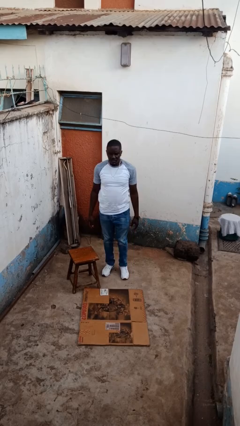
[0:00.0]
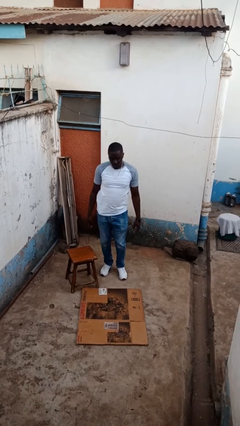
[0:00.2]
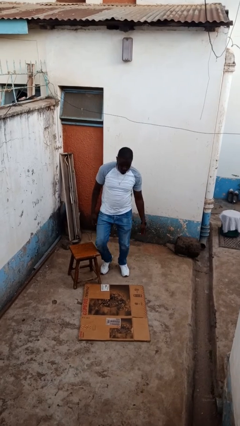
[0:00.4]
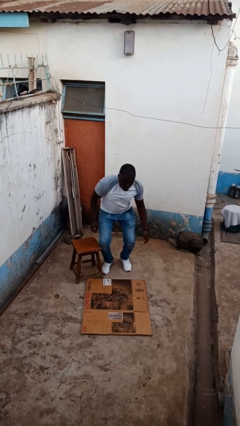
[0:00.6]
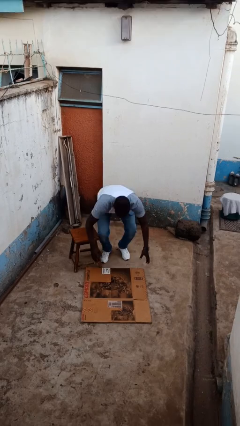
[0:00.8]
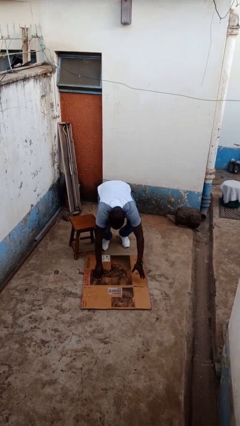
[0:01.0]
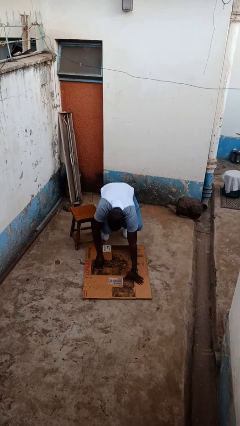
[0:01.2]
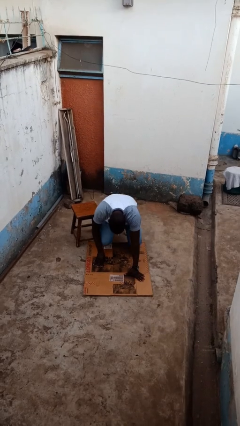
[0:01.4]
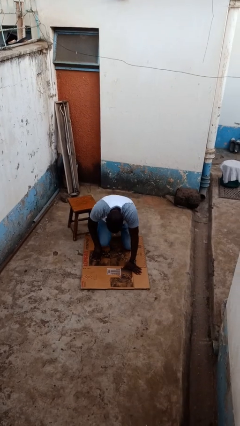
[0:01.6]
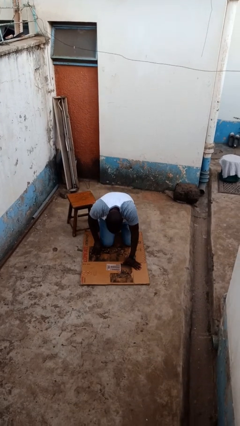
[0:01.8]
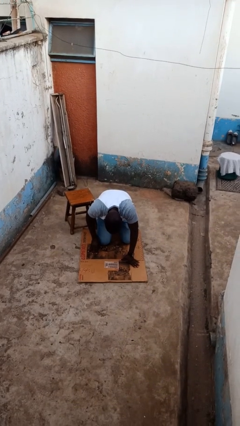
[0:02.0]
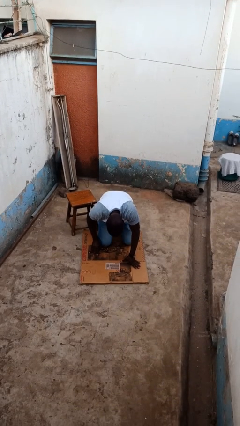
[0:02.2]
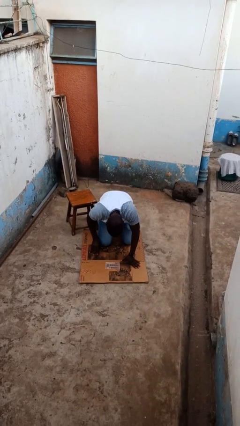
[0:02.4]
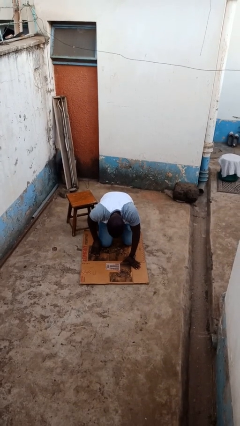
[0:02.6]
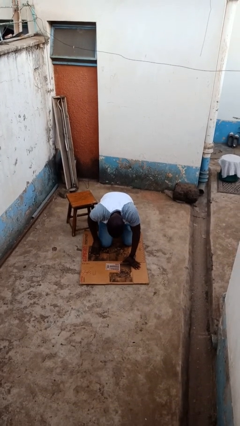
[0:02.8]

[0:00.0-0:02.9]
person trips on object on floor

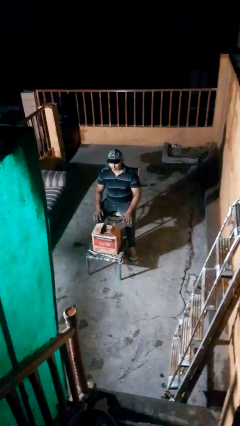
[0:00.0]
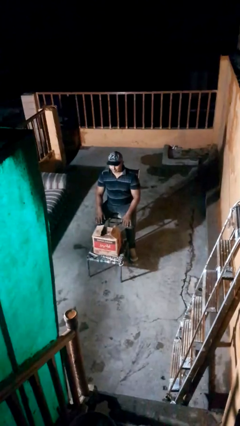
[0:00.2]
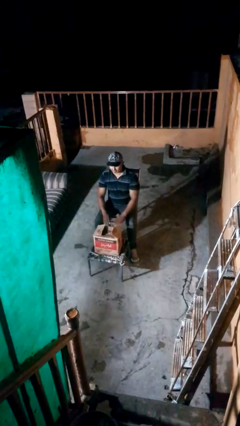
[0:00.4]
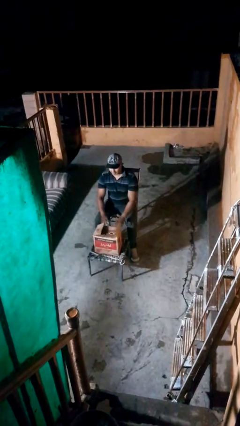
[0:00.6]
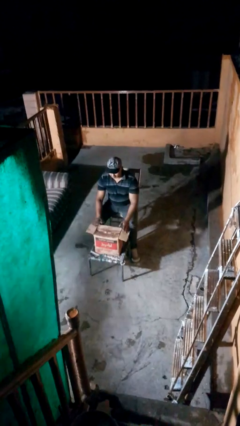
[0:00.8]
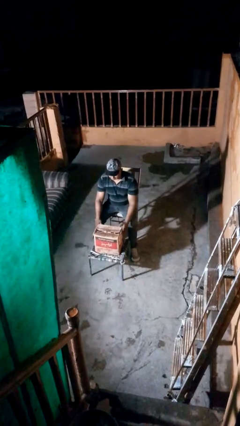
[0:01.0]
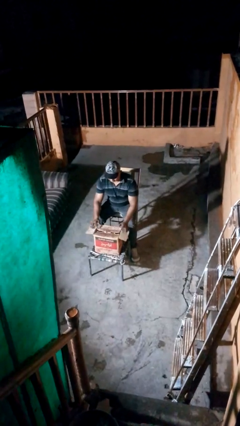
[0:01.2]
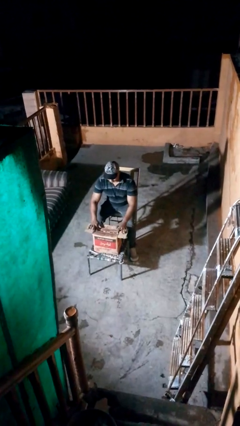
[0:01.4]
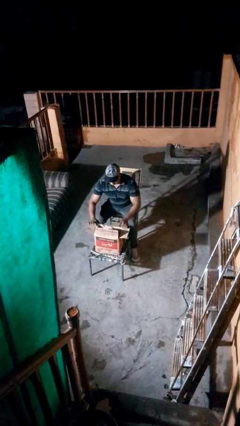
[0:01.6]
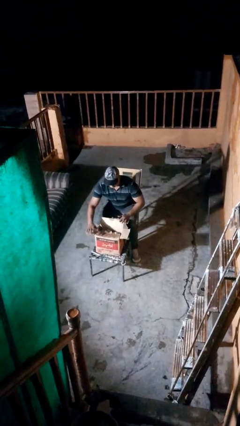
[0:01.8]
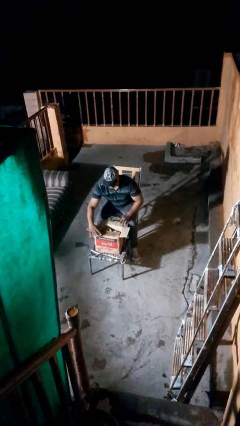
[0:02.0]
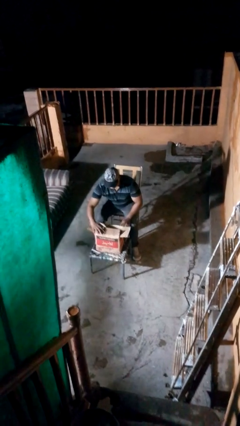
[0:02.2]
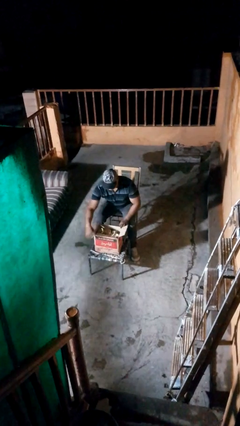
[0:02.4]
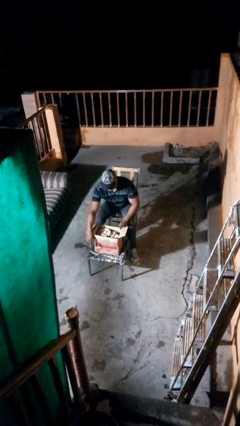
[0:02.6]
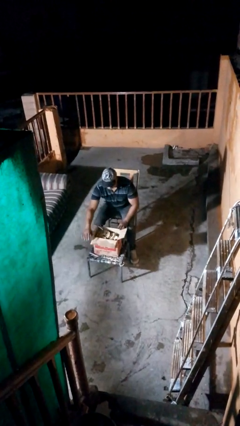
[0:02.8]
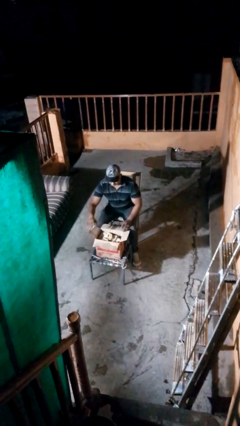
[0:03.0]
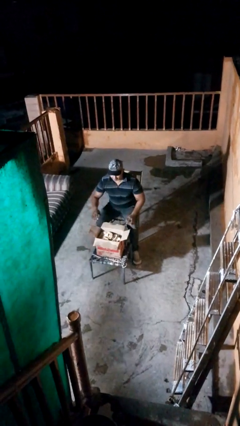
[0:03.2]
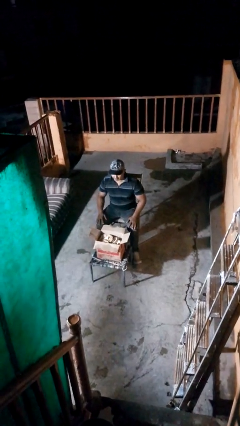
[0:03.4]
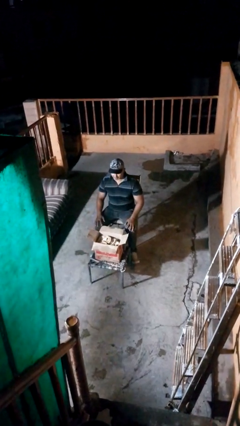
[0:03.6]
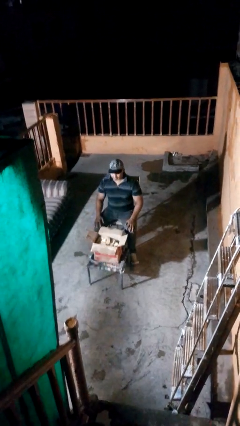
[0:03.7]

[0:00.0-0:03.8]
person opens box

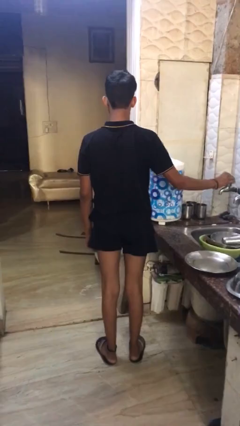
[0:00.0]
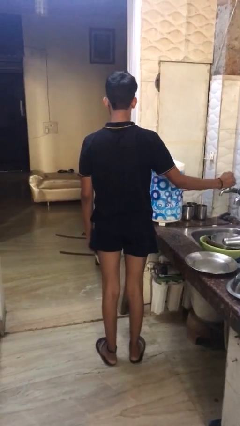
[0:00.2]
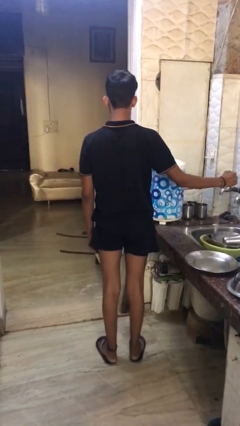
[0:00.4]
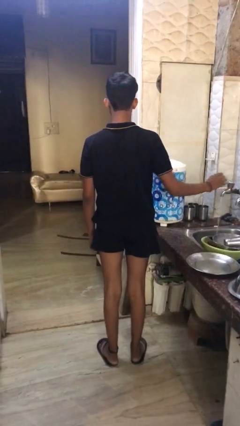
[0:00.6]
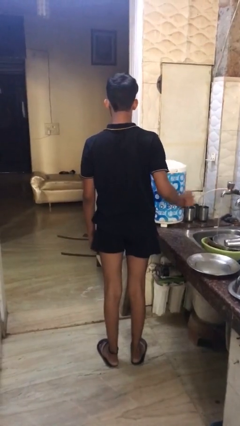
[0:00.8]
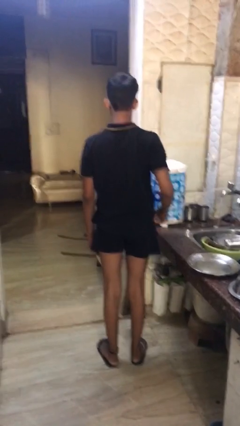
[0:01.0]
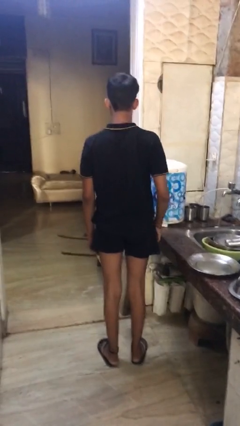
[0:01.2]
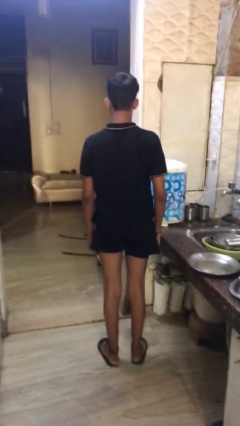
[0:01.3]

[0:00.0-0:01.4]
person turns on faucet

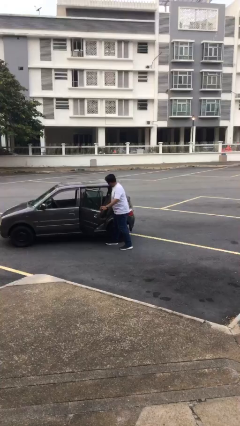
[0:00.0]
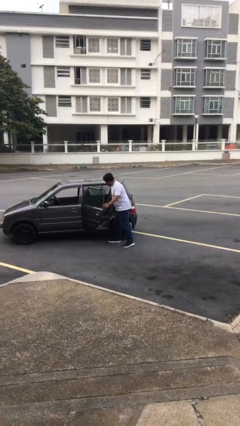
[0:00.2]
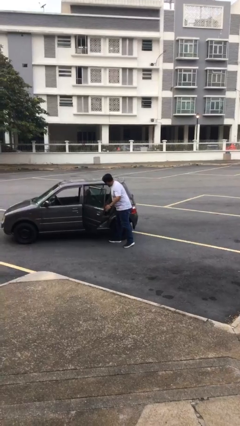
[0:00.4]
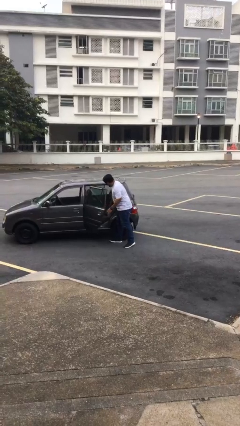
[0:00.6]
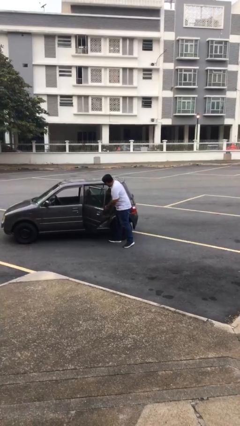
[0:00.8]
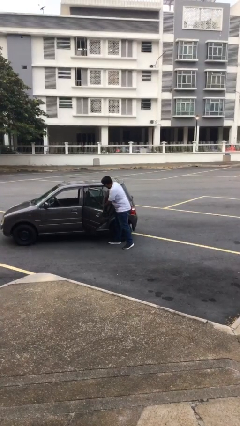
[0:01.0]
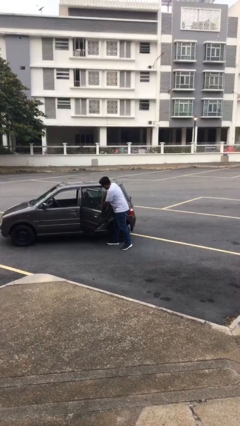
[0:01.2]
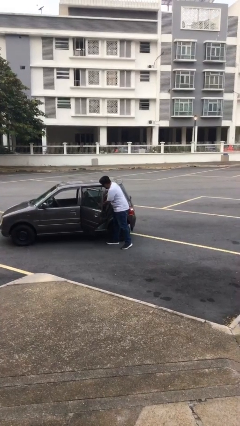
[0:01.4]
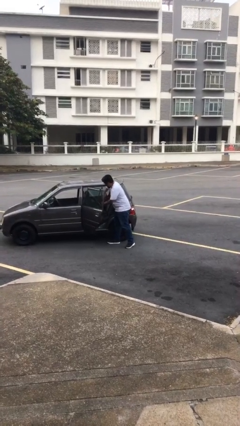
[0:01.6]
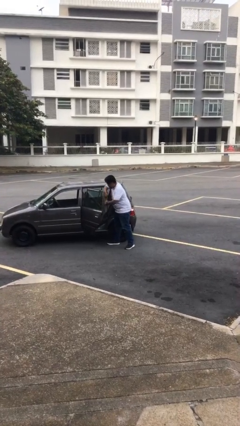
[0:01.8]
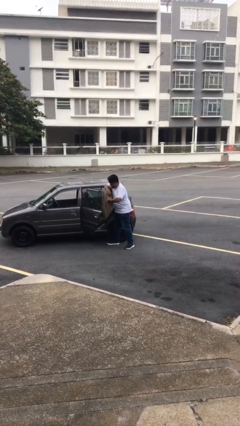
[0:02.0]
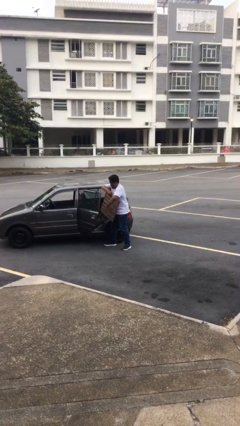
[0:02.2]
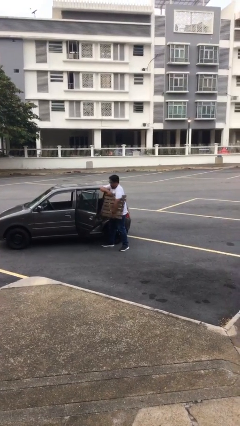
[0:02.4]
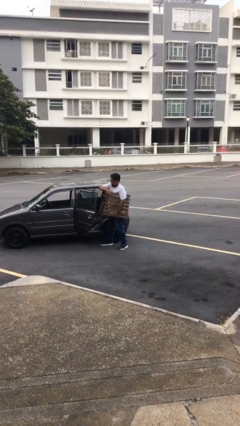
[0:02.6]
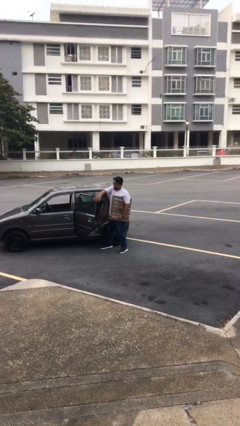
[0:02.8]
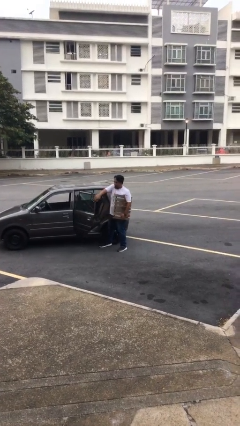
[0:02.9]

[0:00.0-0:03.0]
person unloads car

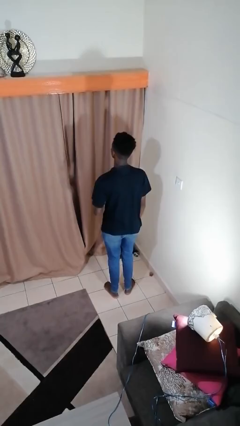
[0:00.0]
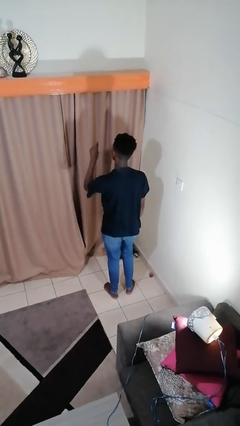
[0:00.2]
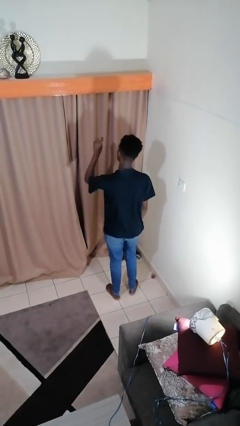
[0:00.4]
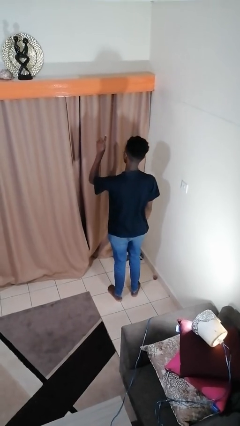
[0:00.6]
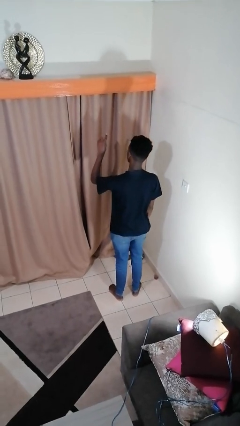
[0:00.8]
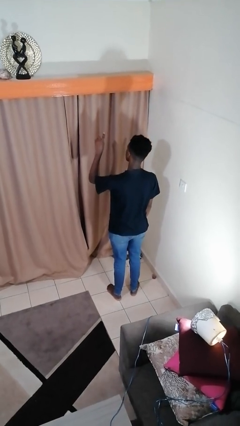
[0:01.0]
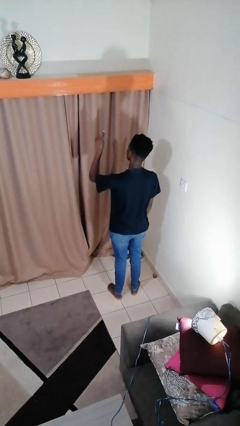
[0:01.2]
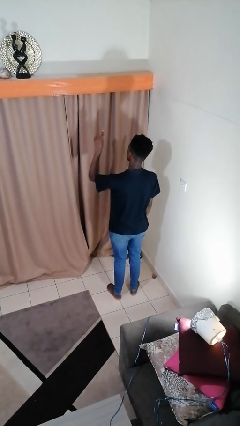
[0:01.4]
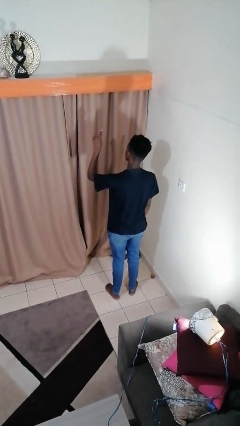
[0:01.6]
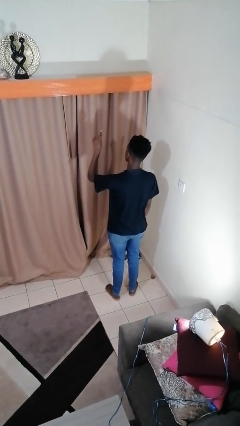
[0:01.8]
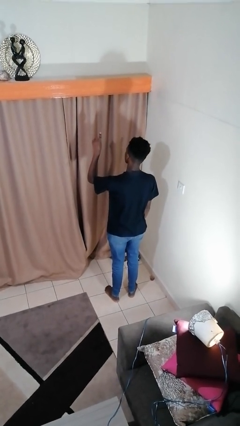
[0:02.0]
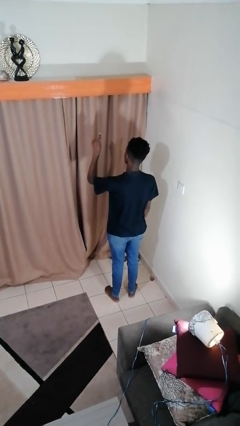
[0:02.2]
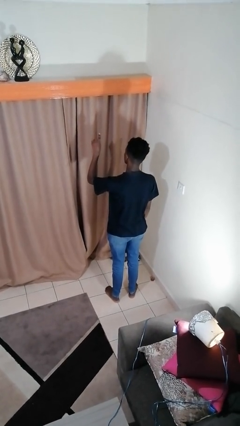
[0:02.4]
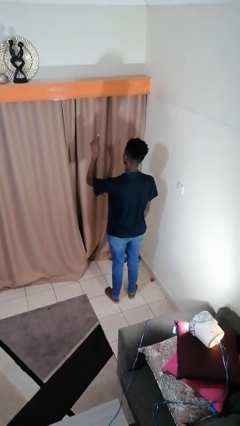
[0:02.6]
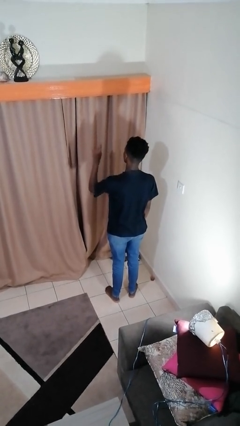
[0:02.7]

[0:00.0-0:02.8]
person gestures number one

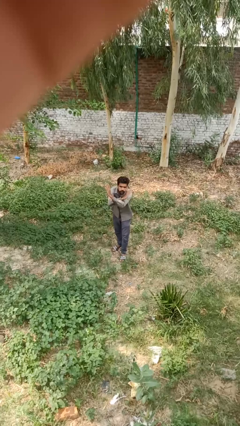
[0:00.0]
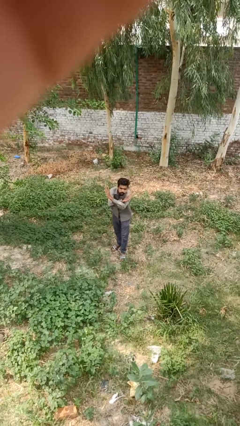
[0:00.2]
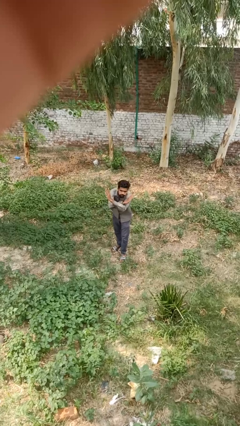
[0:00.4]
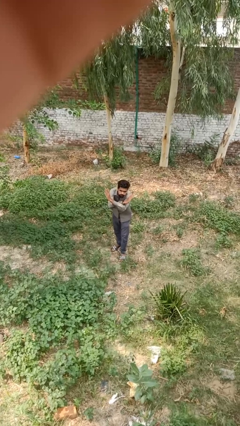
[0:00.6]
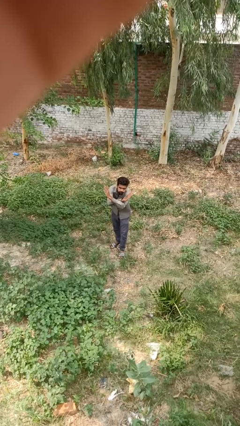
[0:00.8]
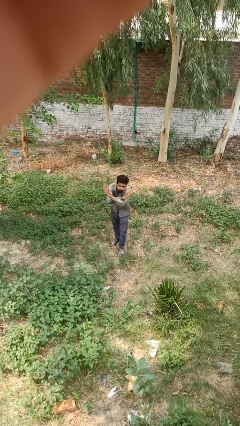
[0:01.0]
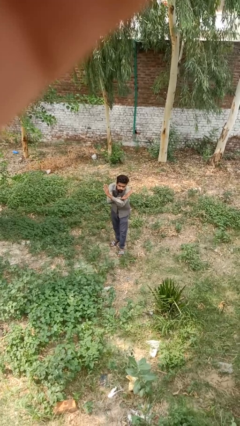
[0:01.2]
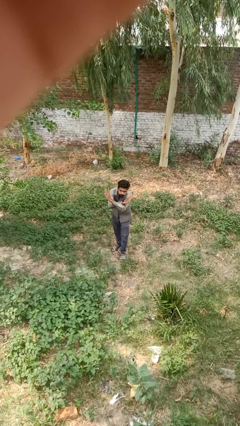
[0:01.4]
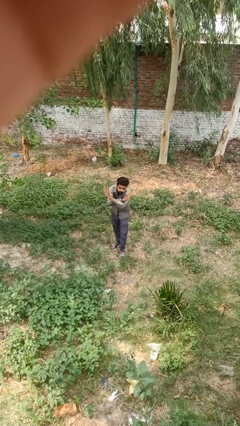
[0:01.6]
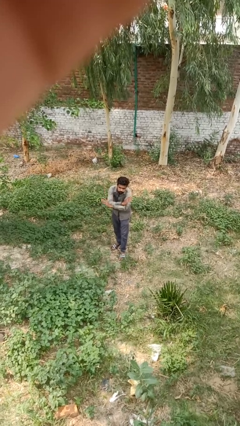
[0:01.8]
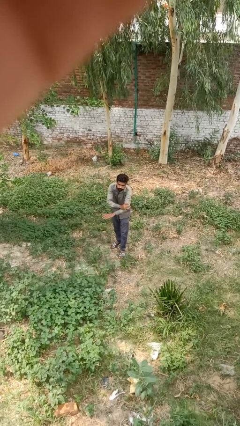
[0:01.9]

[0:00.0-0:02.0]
person crosses arms

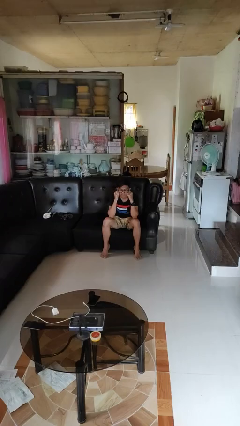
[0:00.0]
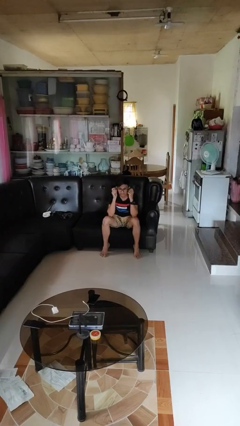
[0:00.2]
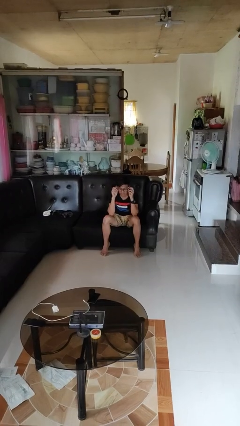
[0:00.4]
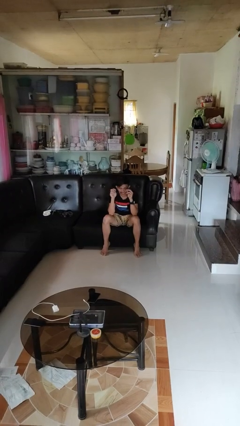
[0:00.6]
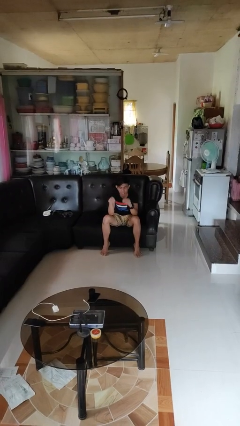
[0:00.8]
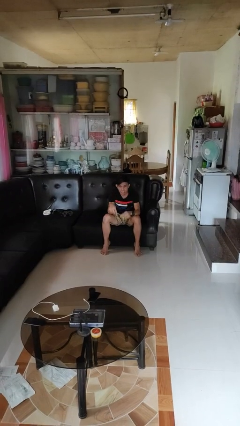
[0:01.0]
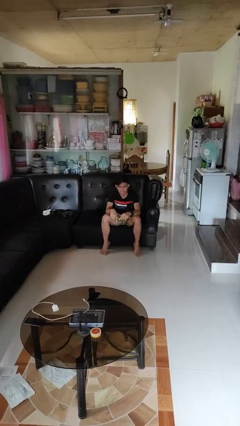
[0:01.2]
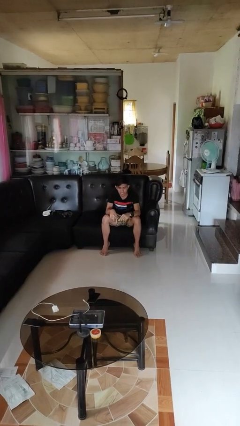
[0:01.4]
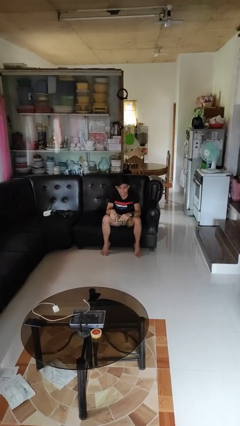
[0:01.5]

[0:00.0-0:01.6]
person takes off glasses

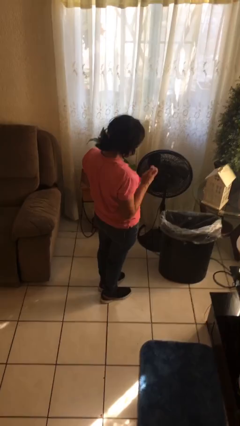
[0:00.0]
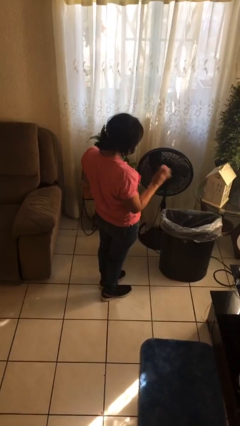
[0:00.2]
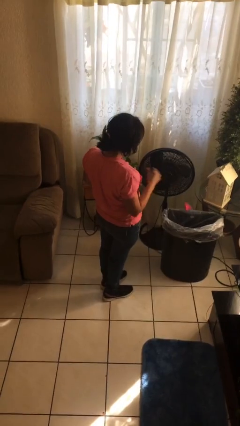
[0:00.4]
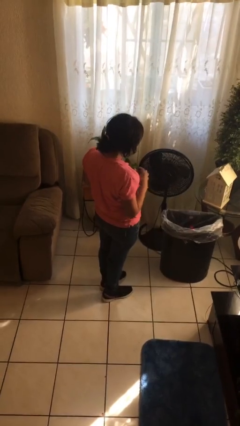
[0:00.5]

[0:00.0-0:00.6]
person discards trash
